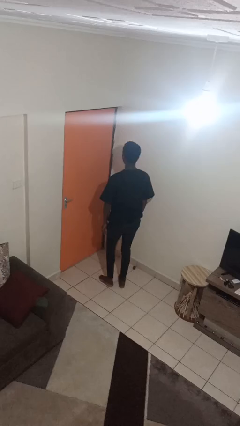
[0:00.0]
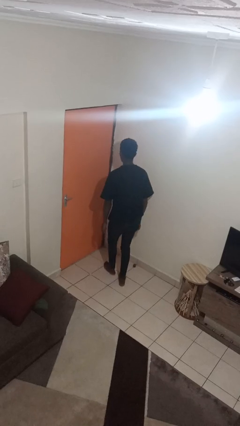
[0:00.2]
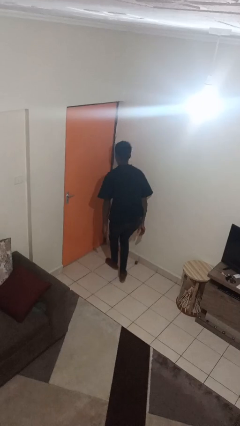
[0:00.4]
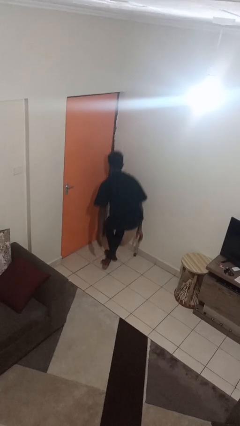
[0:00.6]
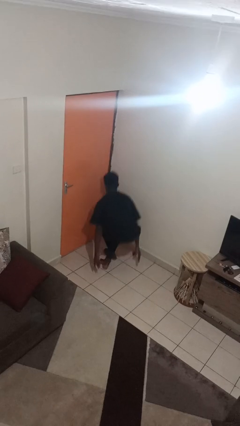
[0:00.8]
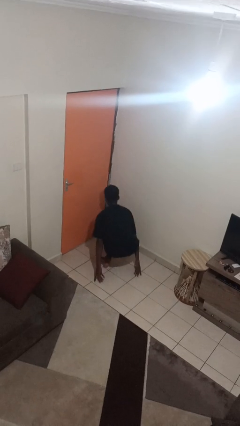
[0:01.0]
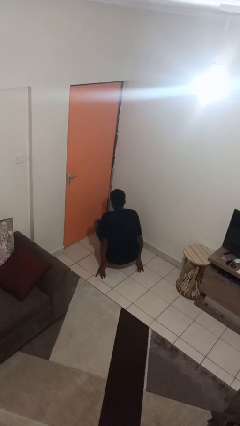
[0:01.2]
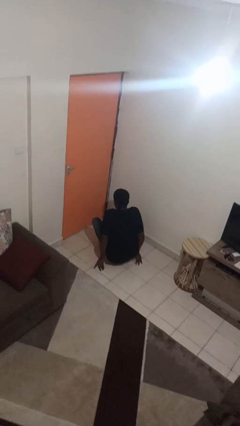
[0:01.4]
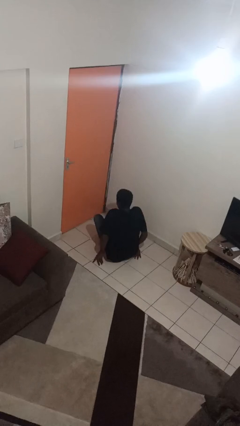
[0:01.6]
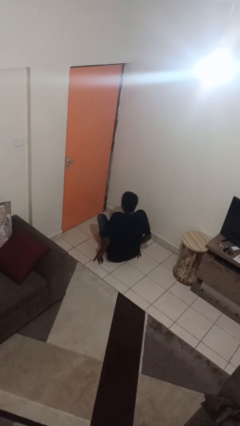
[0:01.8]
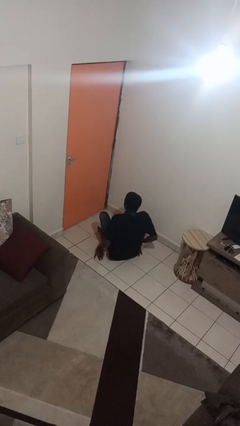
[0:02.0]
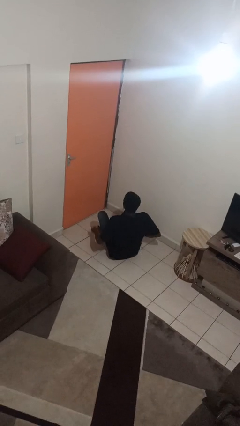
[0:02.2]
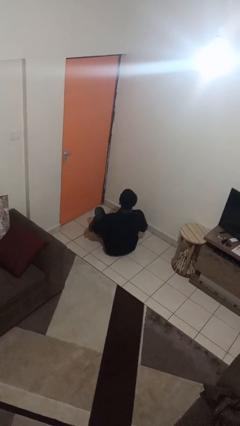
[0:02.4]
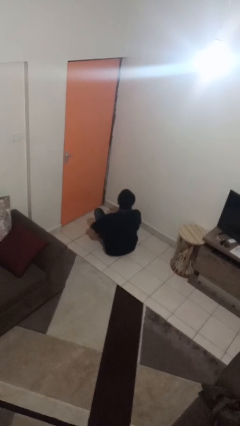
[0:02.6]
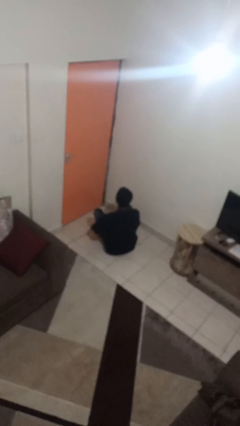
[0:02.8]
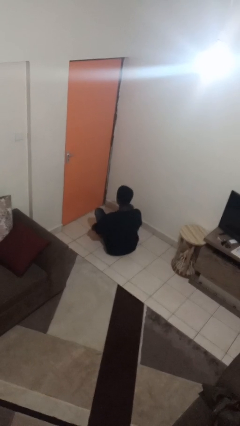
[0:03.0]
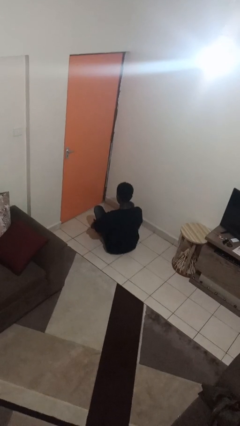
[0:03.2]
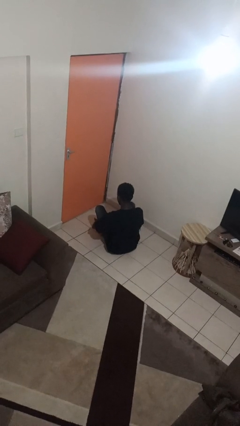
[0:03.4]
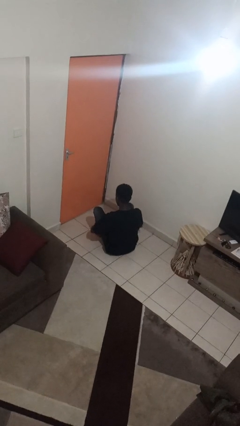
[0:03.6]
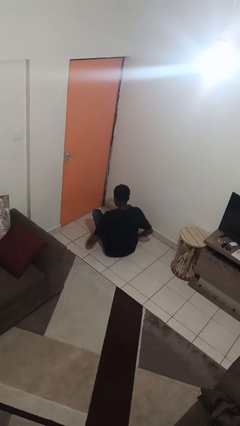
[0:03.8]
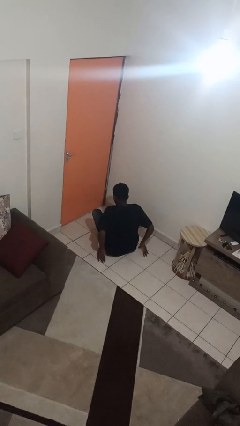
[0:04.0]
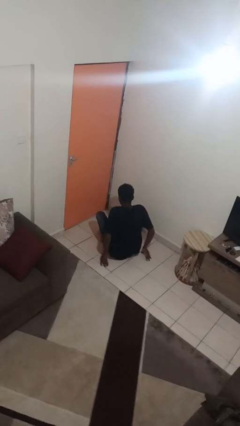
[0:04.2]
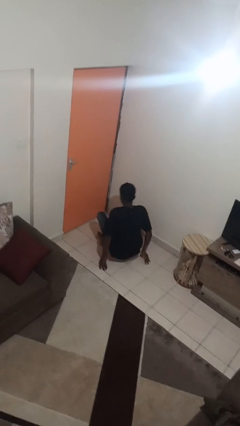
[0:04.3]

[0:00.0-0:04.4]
person sits crisscross

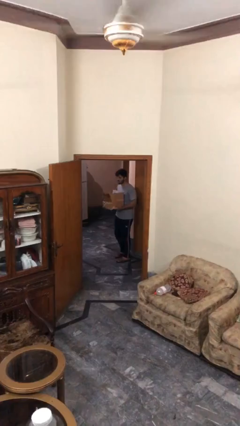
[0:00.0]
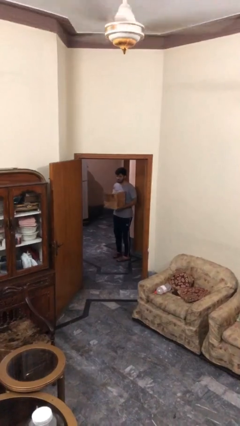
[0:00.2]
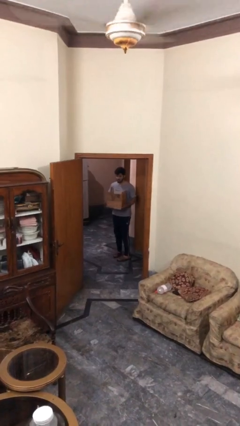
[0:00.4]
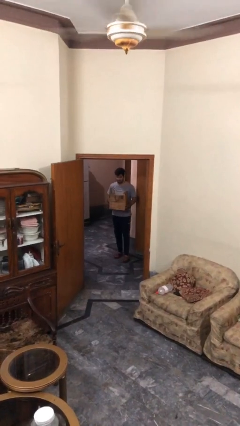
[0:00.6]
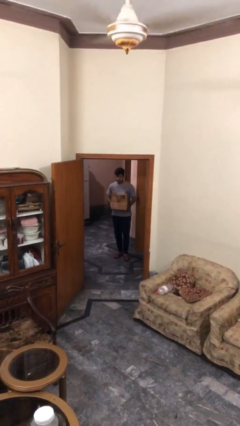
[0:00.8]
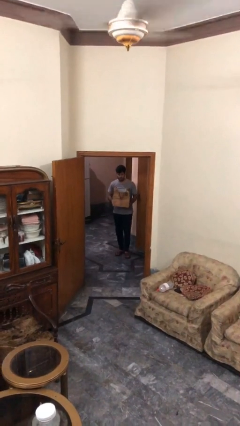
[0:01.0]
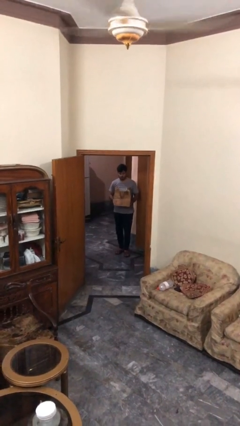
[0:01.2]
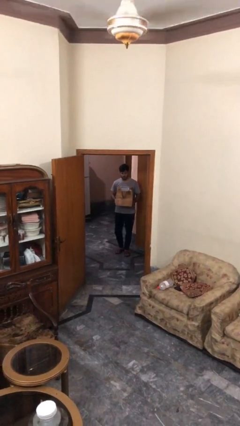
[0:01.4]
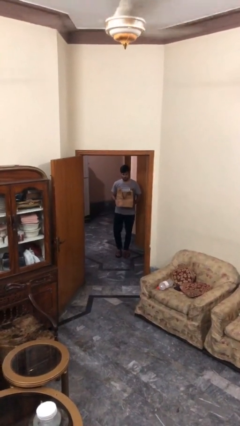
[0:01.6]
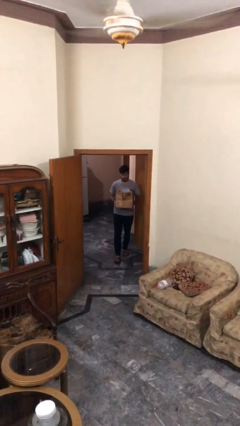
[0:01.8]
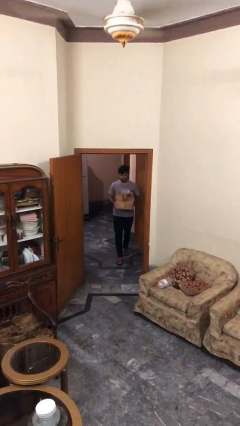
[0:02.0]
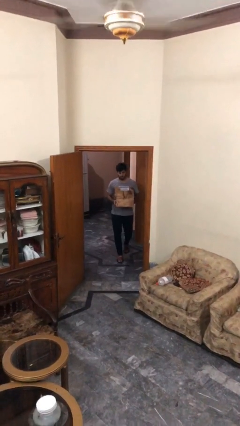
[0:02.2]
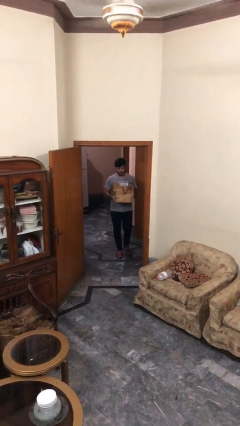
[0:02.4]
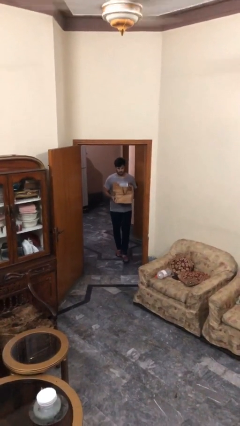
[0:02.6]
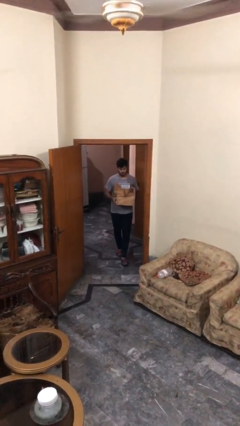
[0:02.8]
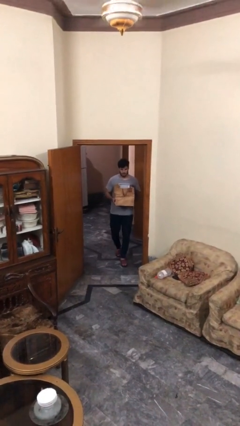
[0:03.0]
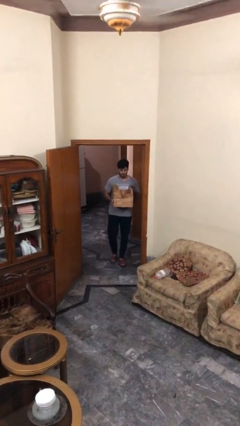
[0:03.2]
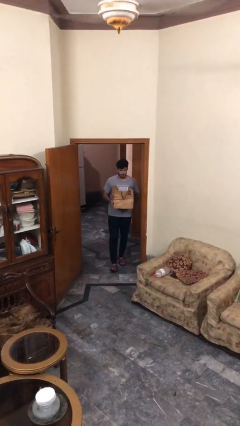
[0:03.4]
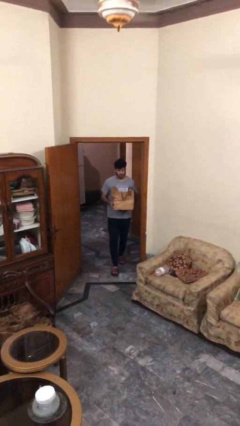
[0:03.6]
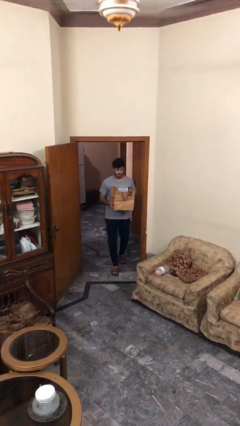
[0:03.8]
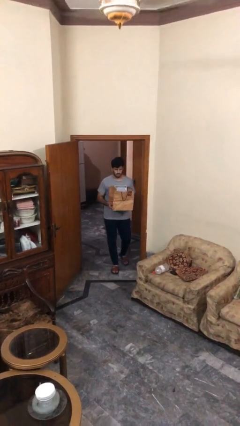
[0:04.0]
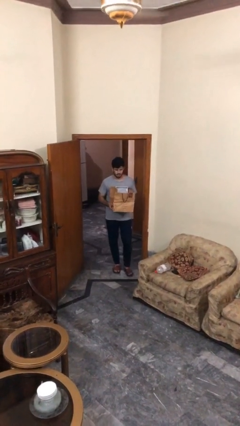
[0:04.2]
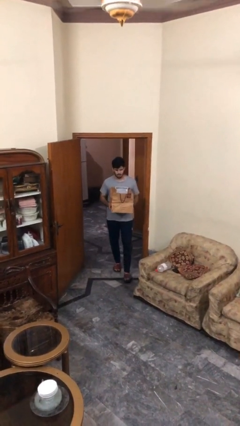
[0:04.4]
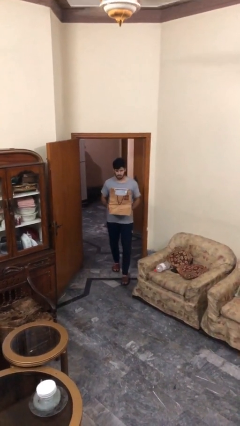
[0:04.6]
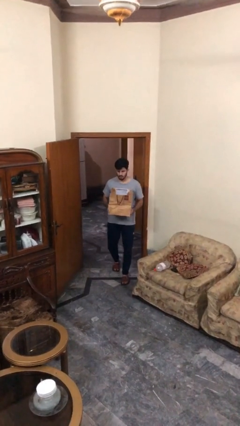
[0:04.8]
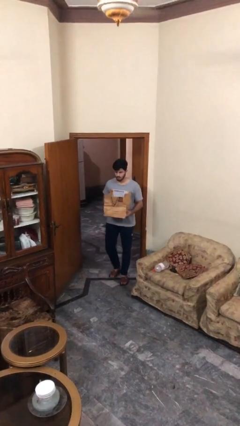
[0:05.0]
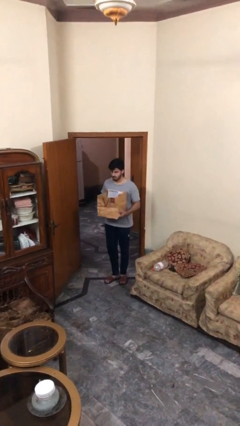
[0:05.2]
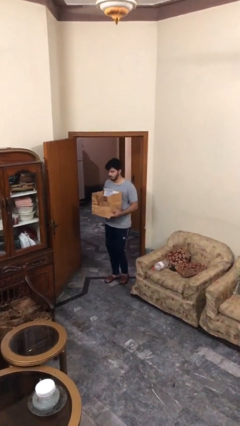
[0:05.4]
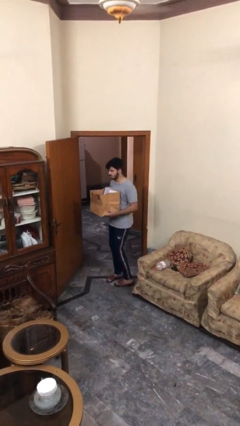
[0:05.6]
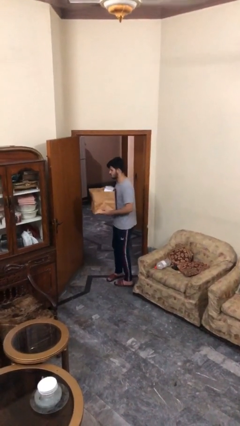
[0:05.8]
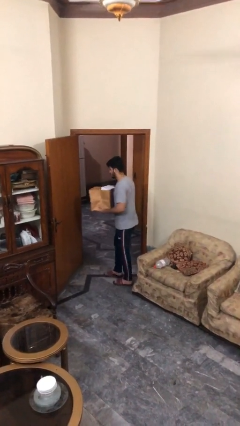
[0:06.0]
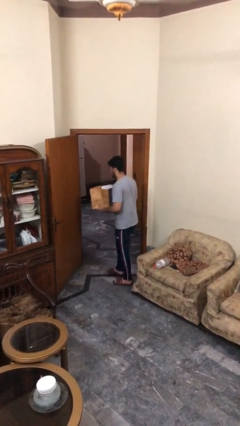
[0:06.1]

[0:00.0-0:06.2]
person carries groceries

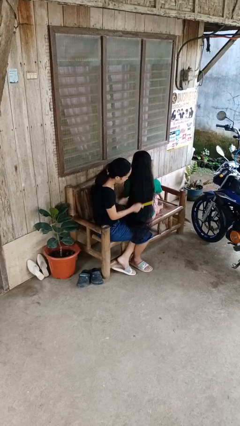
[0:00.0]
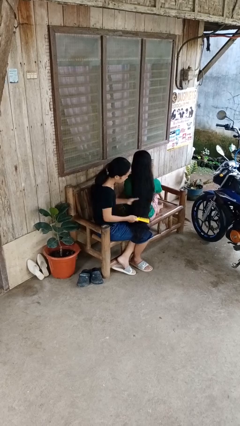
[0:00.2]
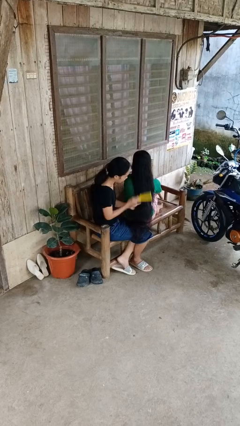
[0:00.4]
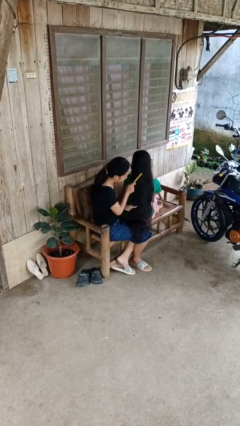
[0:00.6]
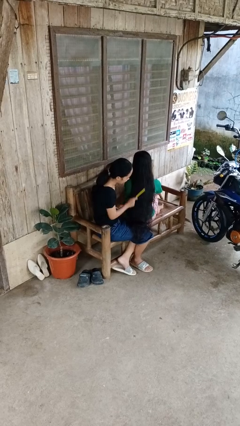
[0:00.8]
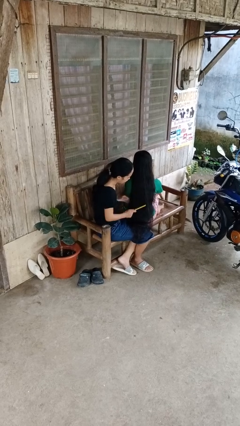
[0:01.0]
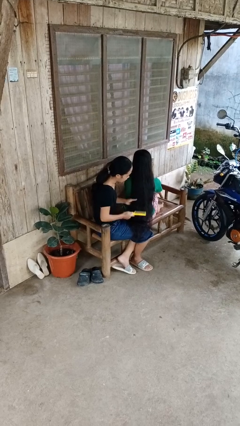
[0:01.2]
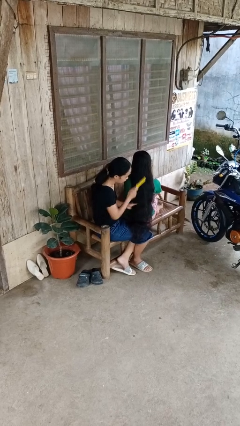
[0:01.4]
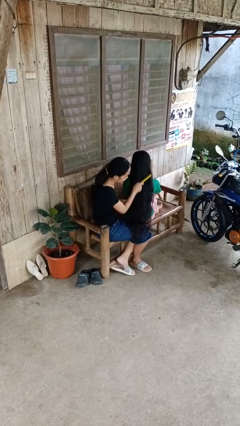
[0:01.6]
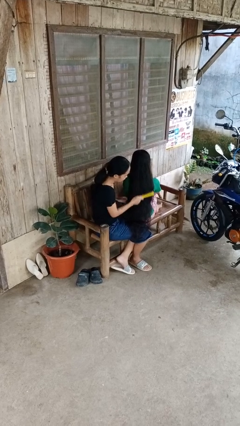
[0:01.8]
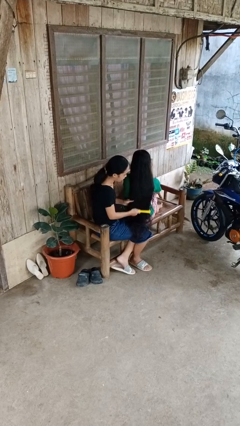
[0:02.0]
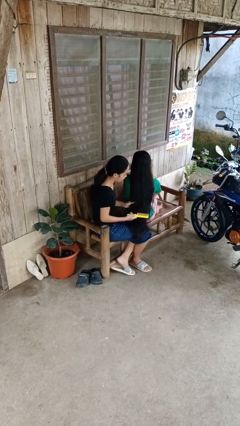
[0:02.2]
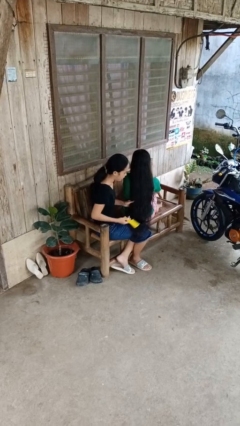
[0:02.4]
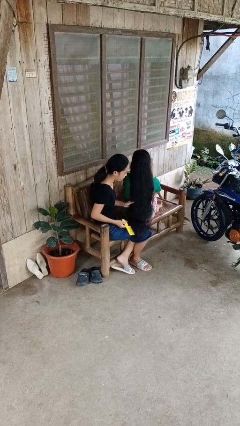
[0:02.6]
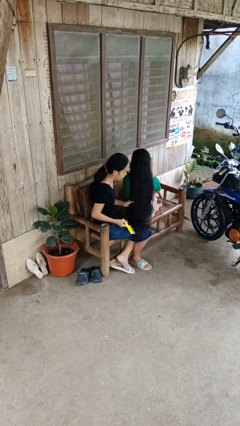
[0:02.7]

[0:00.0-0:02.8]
person brushes hair of person

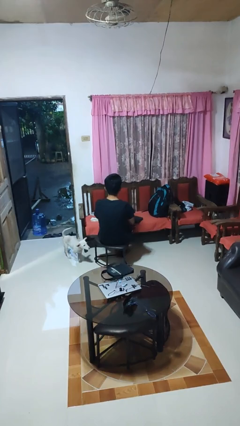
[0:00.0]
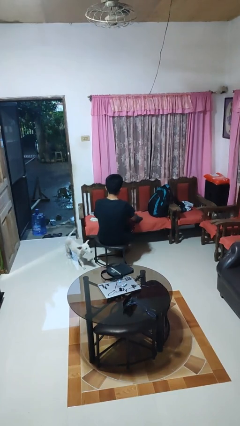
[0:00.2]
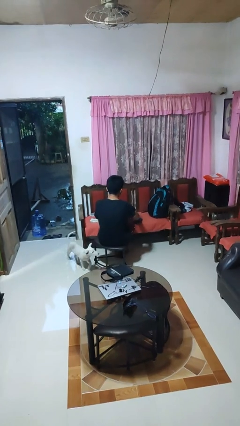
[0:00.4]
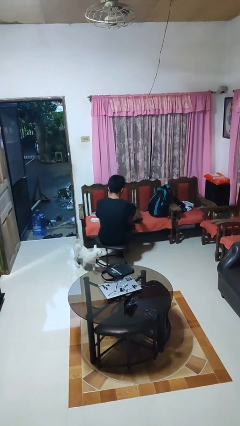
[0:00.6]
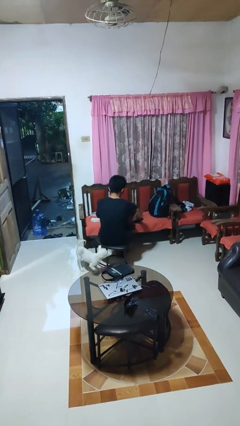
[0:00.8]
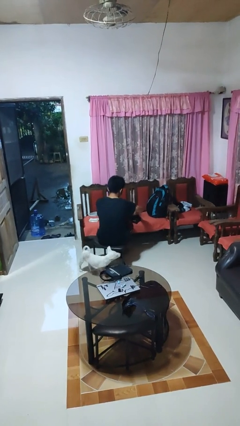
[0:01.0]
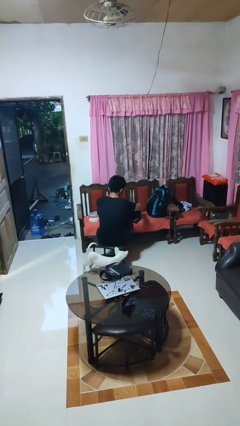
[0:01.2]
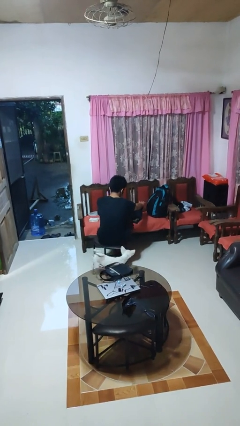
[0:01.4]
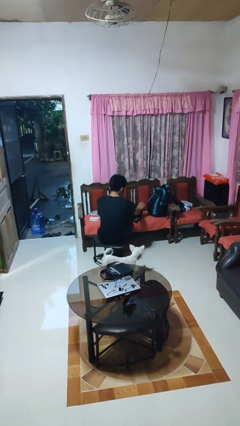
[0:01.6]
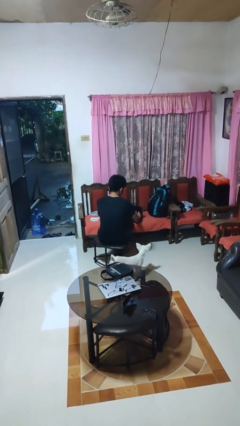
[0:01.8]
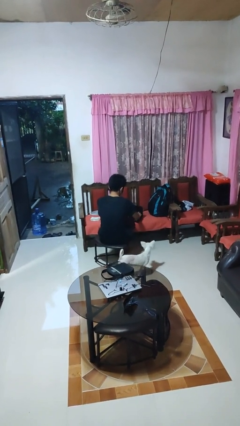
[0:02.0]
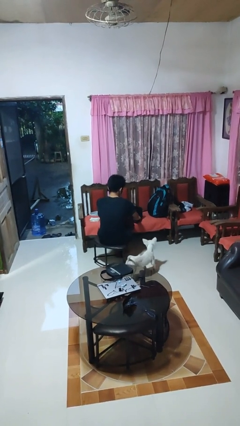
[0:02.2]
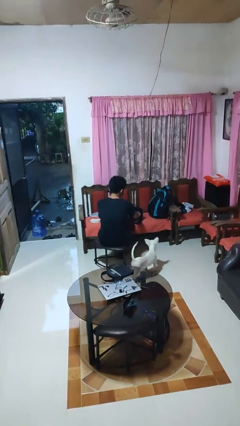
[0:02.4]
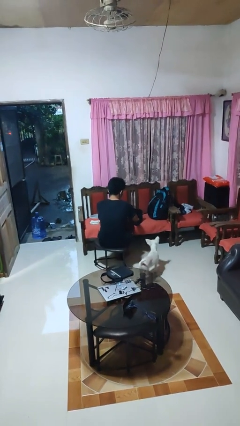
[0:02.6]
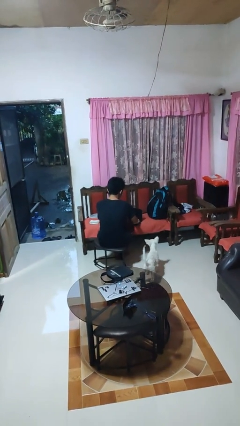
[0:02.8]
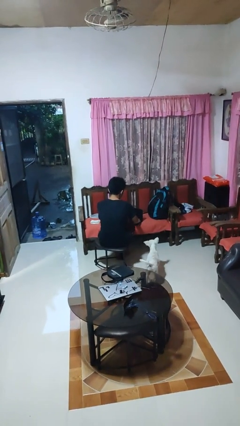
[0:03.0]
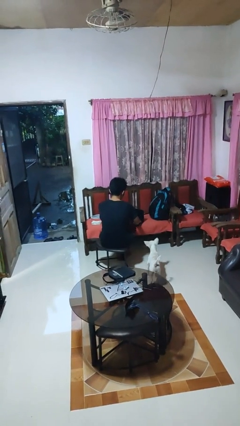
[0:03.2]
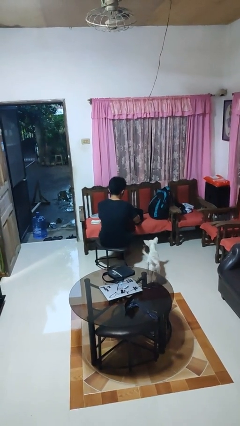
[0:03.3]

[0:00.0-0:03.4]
person opens laptop

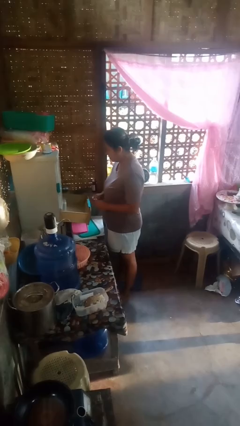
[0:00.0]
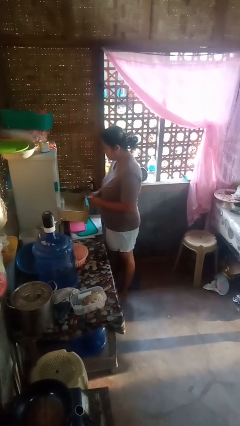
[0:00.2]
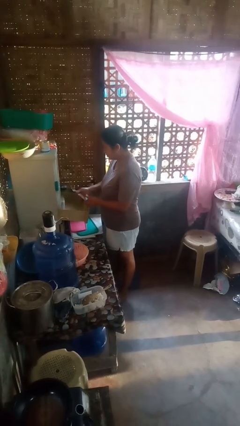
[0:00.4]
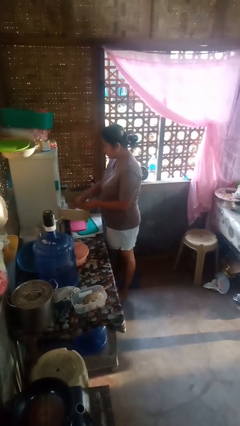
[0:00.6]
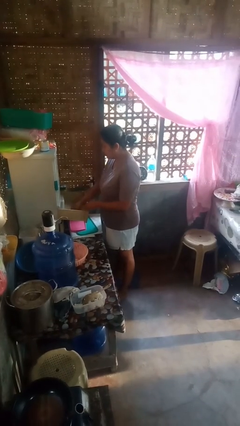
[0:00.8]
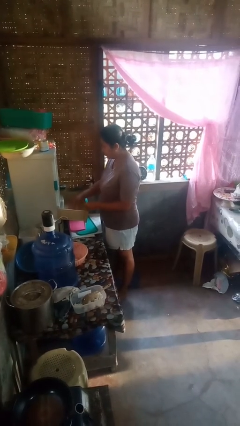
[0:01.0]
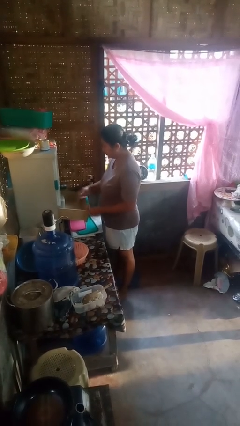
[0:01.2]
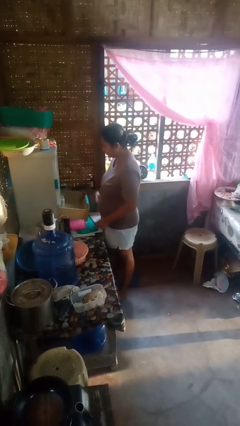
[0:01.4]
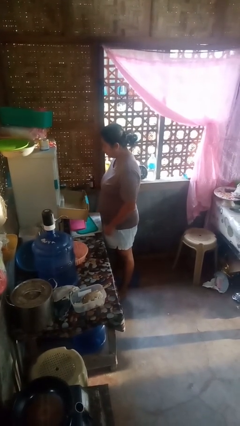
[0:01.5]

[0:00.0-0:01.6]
person puts object into kitchen drawer
